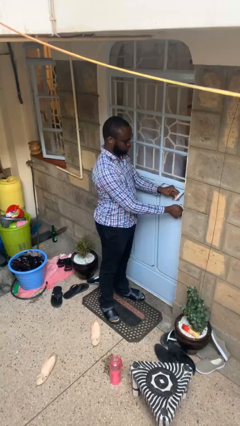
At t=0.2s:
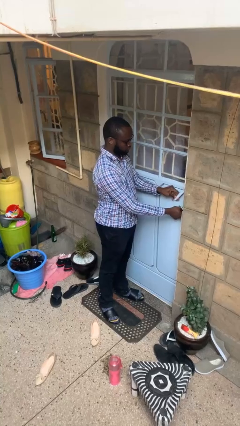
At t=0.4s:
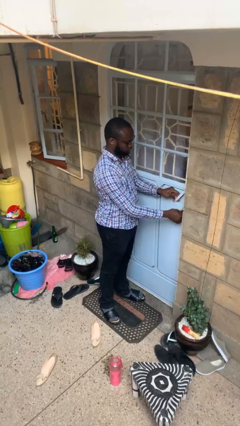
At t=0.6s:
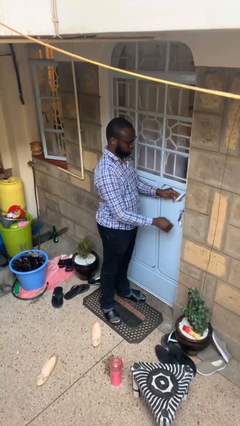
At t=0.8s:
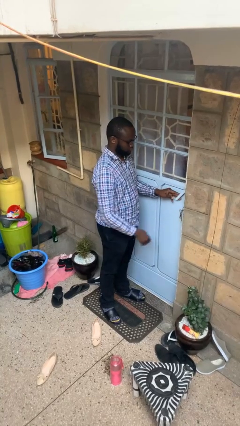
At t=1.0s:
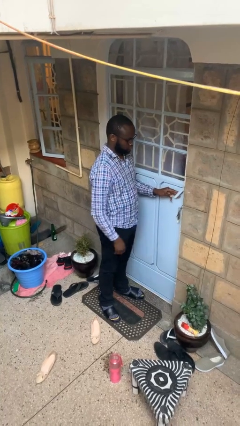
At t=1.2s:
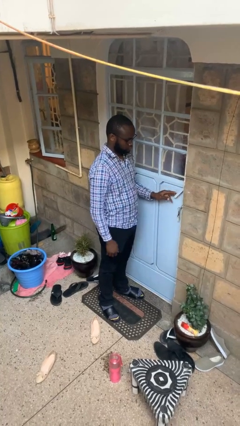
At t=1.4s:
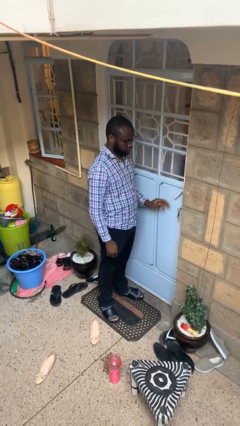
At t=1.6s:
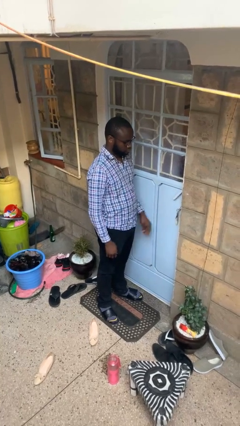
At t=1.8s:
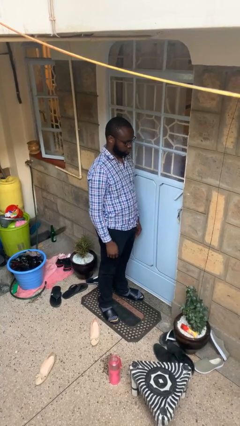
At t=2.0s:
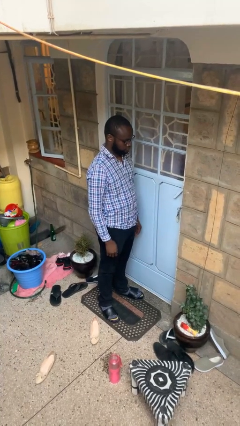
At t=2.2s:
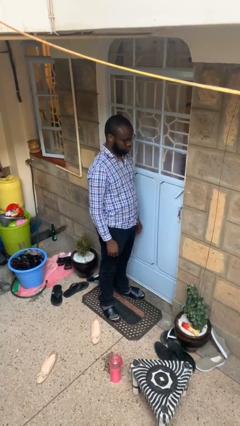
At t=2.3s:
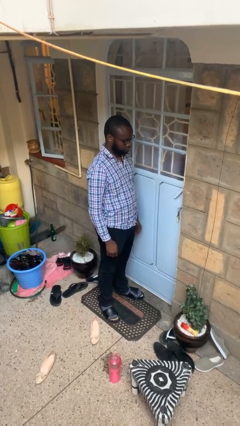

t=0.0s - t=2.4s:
person locks door with keys

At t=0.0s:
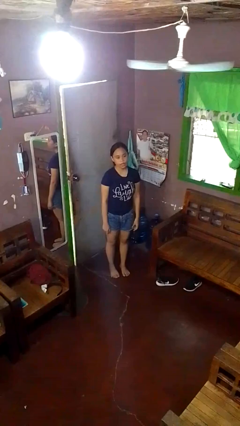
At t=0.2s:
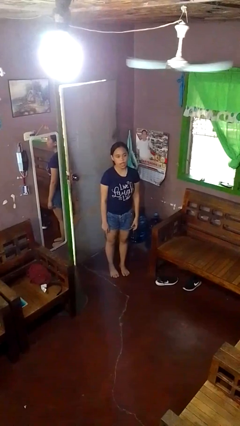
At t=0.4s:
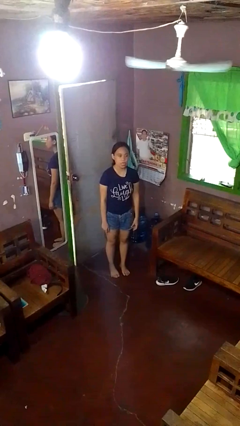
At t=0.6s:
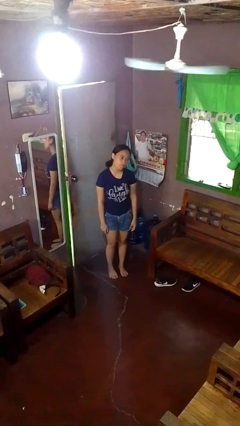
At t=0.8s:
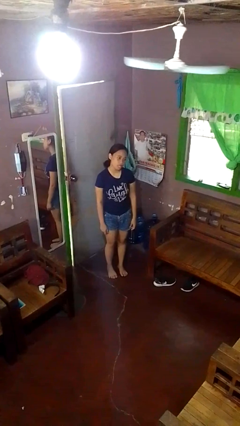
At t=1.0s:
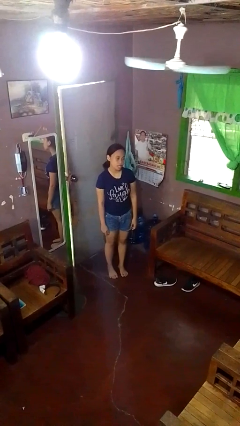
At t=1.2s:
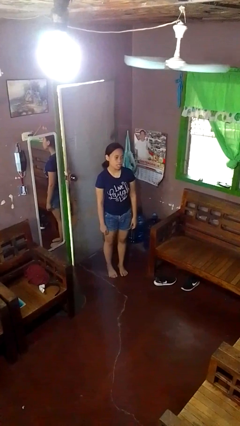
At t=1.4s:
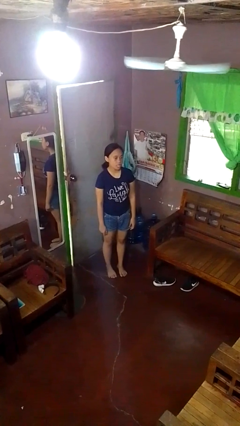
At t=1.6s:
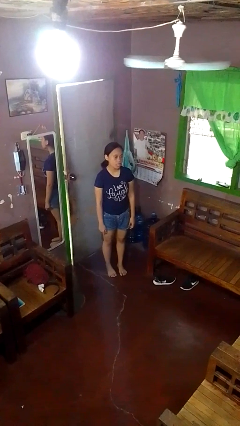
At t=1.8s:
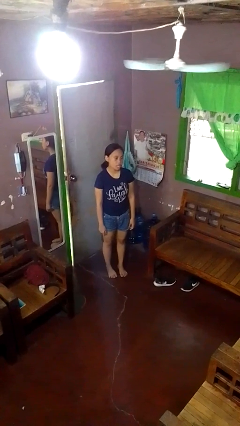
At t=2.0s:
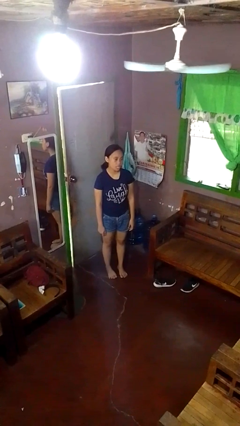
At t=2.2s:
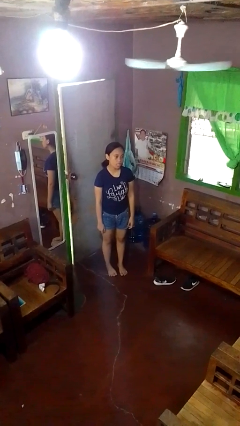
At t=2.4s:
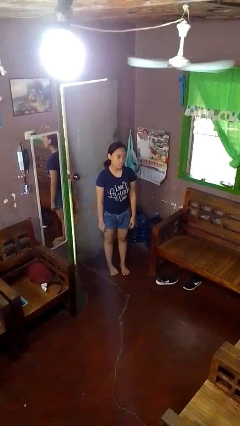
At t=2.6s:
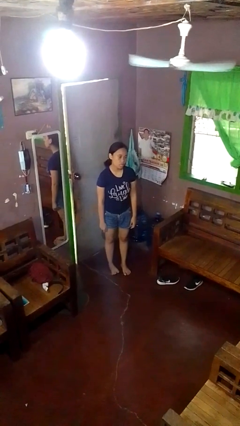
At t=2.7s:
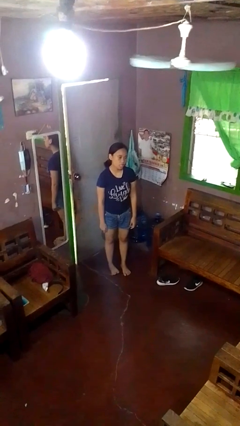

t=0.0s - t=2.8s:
person sticks out tongue

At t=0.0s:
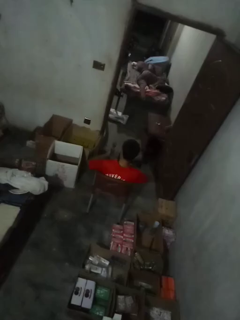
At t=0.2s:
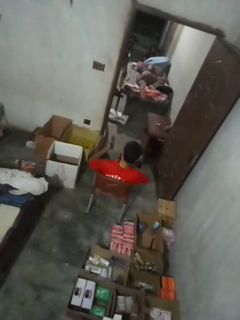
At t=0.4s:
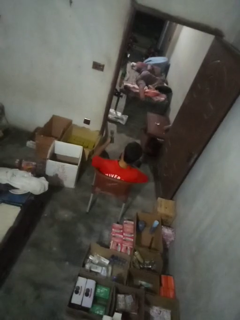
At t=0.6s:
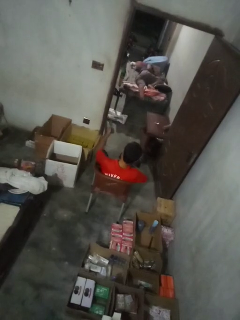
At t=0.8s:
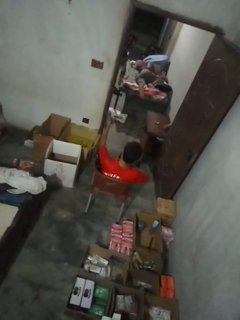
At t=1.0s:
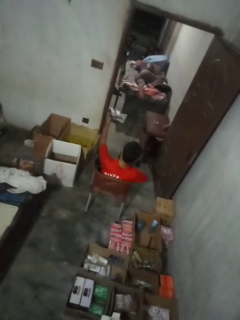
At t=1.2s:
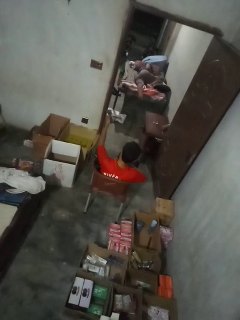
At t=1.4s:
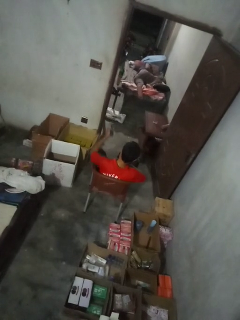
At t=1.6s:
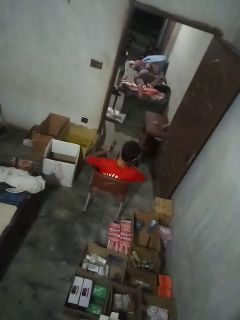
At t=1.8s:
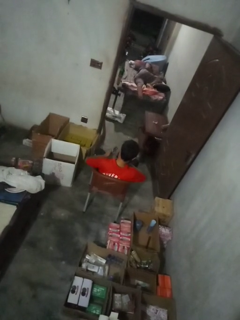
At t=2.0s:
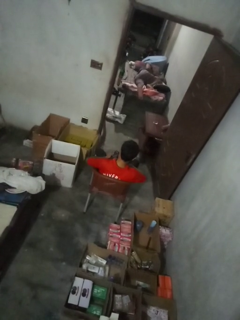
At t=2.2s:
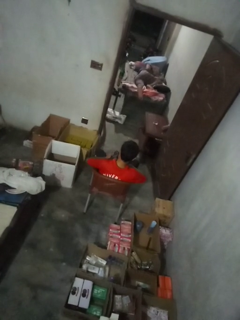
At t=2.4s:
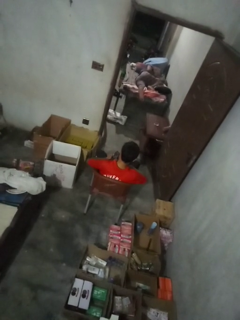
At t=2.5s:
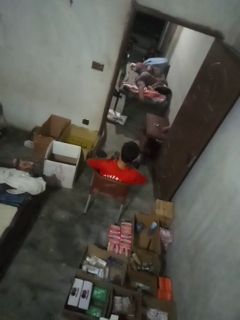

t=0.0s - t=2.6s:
person uses television remote

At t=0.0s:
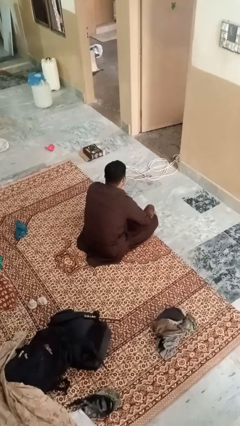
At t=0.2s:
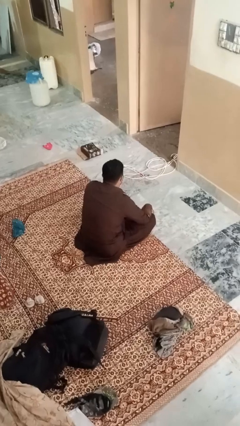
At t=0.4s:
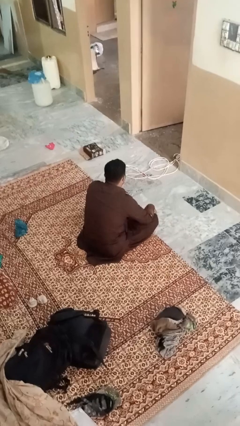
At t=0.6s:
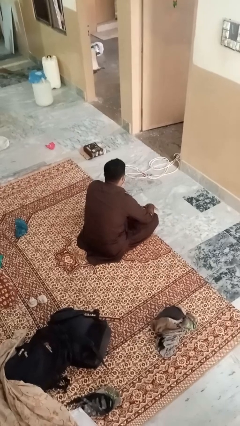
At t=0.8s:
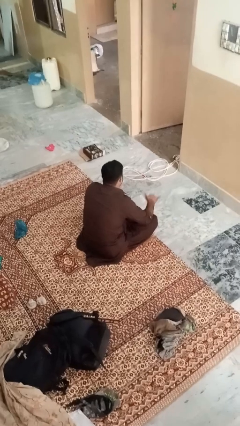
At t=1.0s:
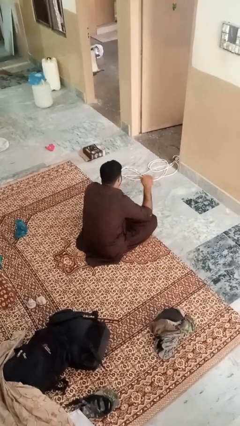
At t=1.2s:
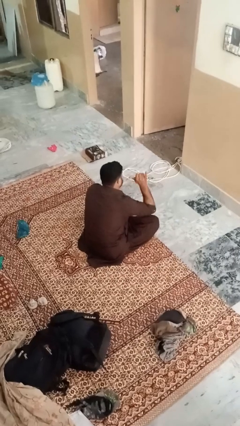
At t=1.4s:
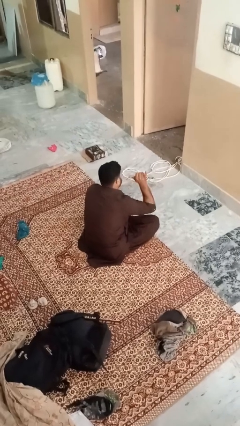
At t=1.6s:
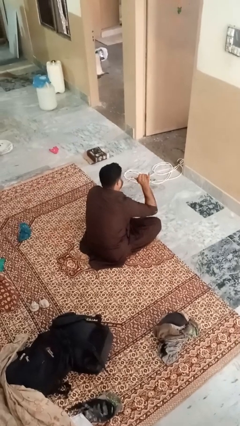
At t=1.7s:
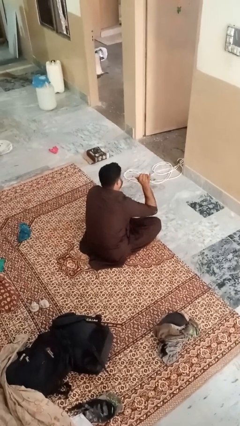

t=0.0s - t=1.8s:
person gestures hang loose

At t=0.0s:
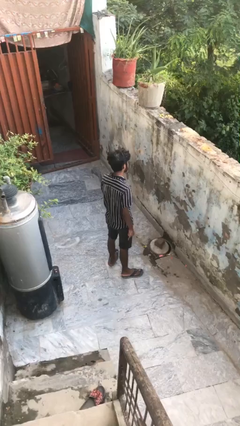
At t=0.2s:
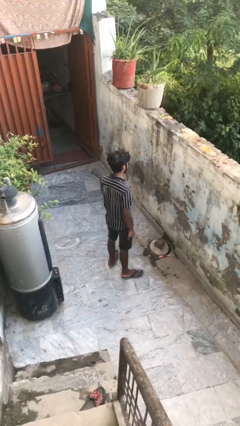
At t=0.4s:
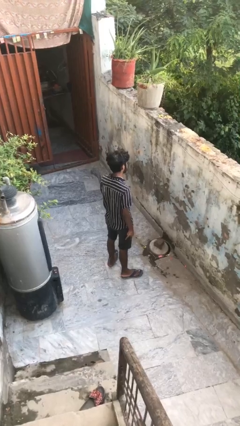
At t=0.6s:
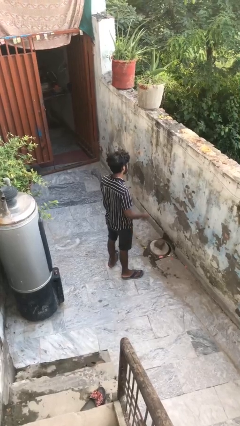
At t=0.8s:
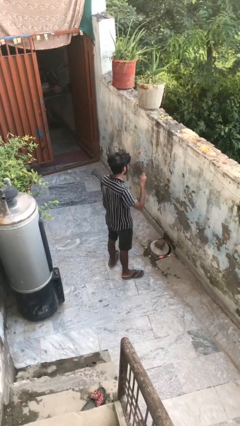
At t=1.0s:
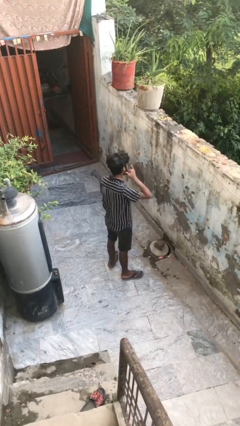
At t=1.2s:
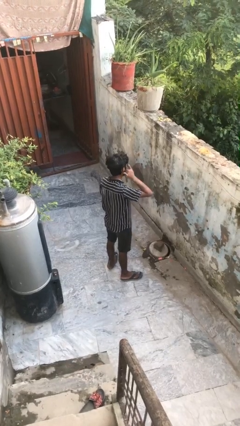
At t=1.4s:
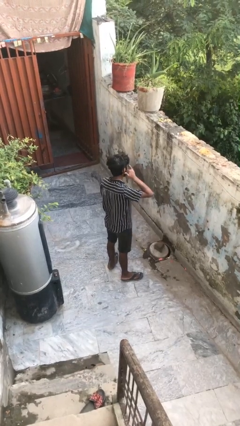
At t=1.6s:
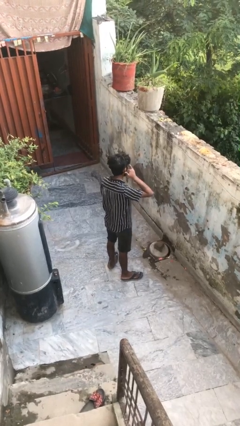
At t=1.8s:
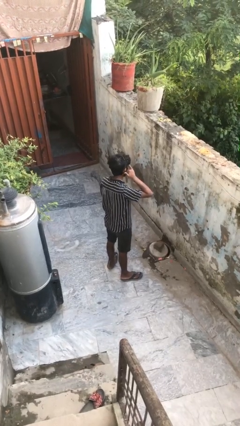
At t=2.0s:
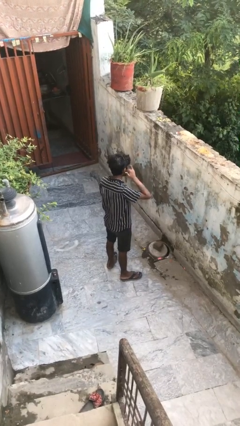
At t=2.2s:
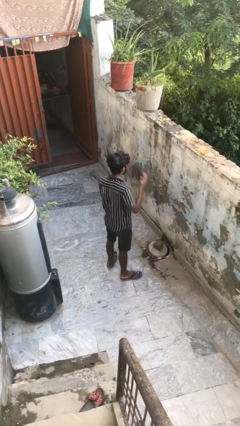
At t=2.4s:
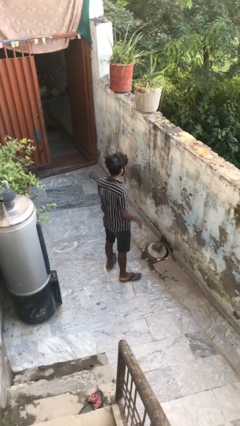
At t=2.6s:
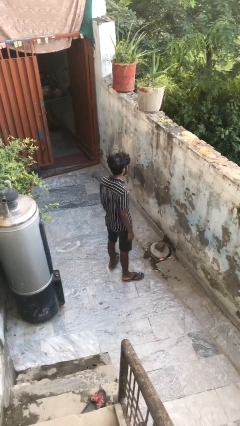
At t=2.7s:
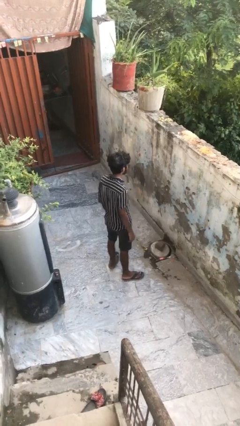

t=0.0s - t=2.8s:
person gestures call me

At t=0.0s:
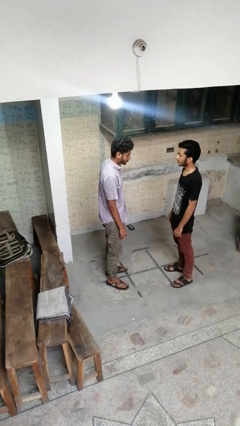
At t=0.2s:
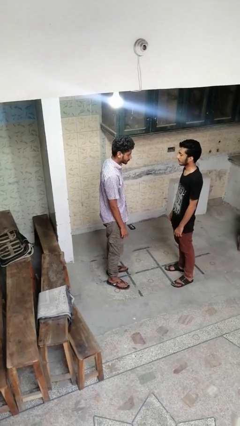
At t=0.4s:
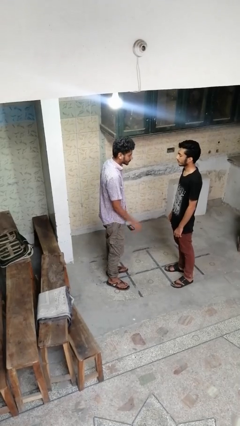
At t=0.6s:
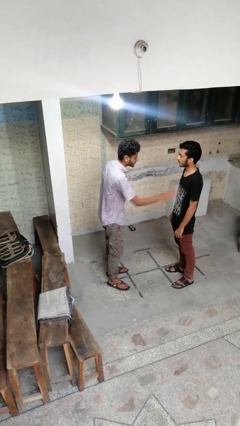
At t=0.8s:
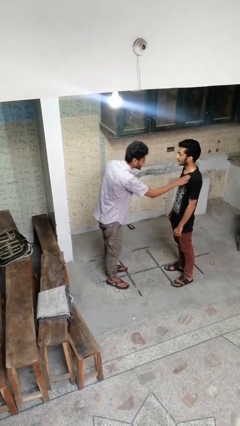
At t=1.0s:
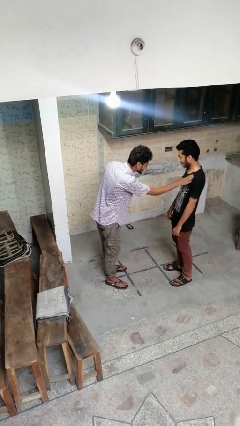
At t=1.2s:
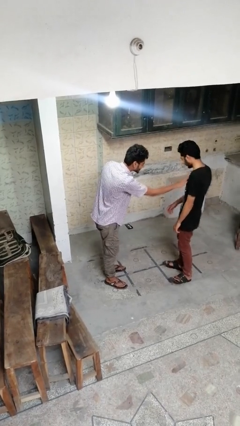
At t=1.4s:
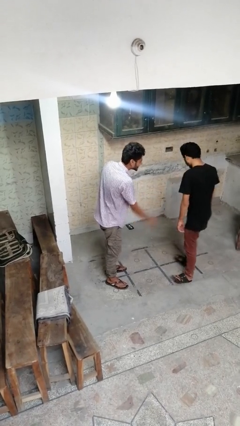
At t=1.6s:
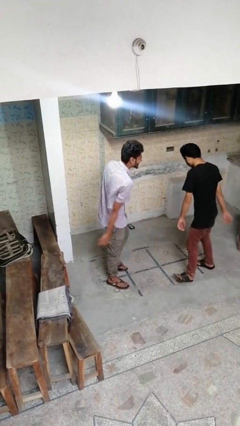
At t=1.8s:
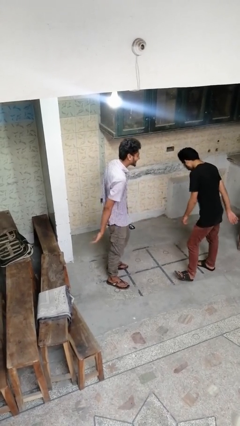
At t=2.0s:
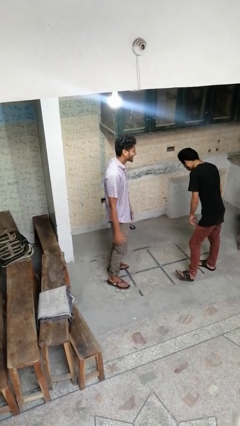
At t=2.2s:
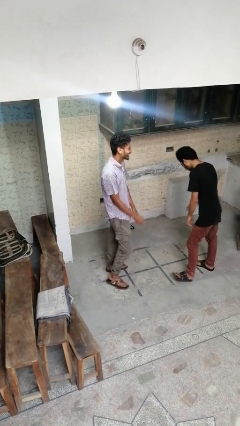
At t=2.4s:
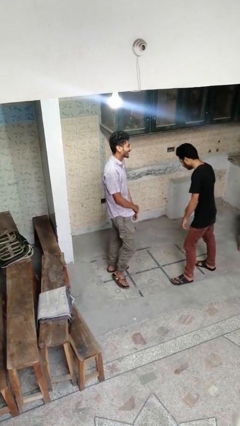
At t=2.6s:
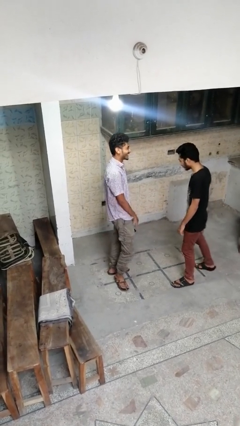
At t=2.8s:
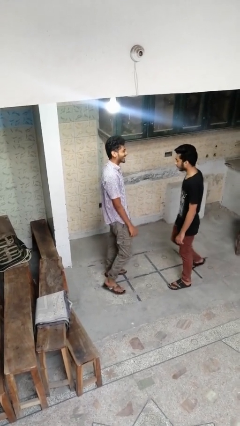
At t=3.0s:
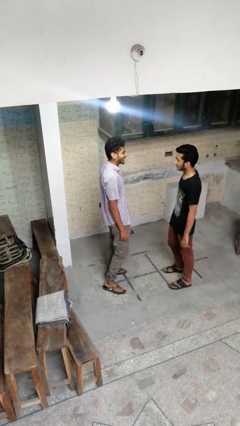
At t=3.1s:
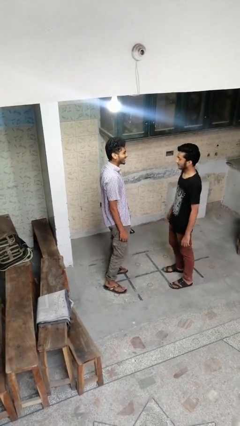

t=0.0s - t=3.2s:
person shoves person

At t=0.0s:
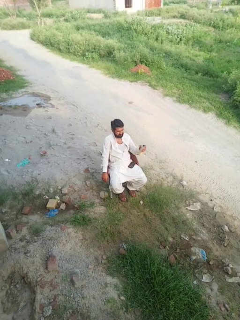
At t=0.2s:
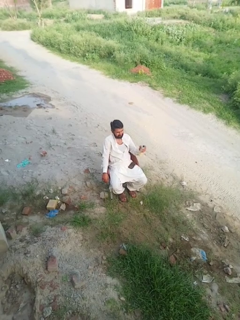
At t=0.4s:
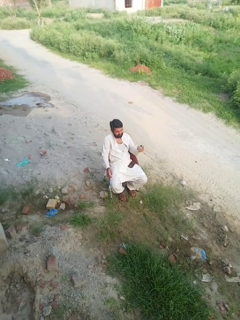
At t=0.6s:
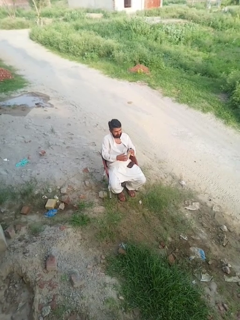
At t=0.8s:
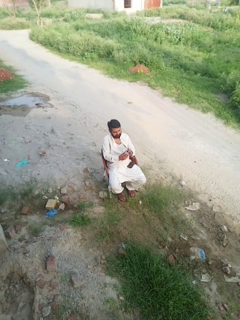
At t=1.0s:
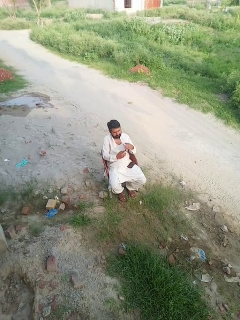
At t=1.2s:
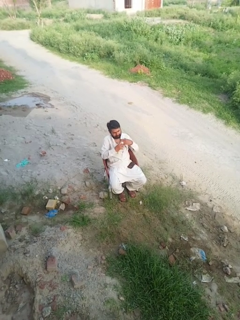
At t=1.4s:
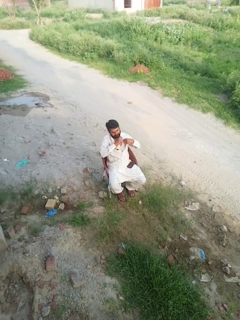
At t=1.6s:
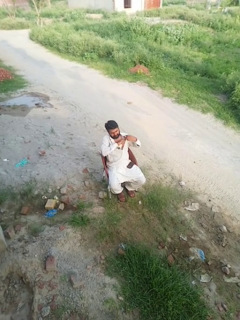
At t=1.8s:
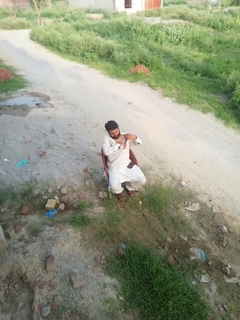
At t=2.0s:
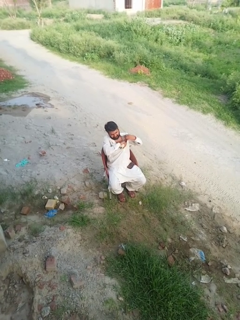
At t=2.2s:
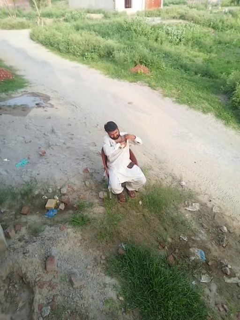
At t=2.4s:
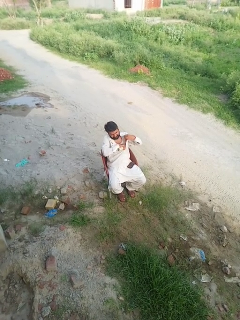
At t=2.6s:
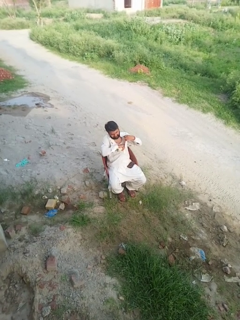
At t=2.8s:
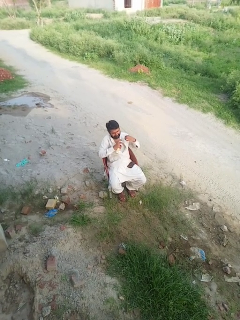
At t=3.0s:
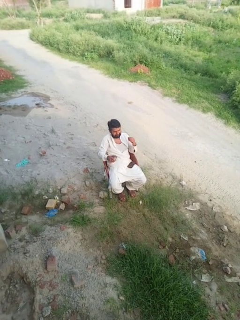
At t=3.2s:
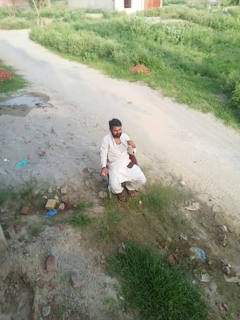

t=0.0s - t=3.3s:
person applies deodorant

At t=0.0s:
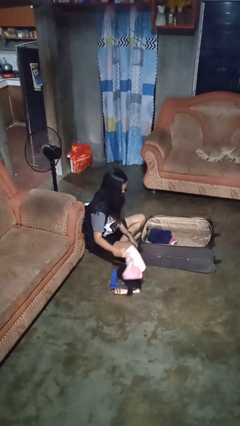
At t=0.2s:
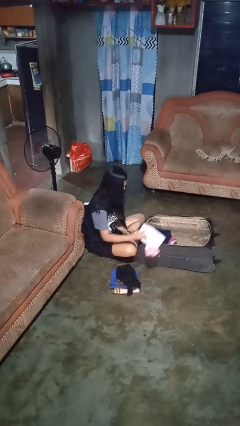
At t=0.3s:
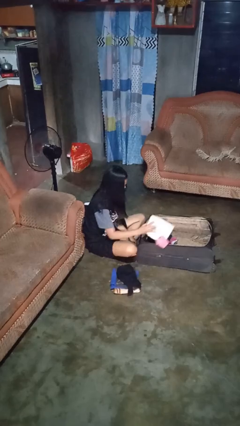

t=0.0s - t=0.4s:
person loads clothes into suitcase
